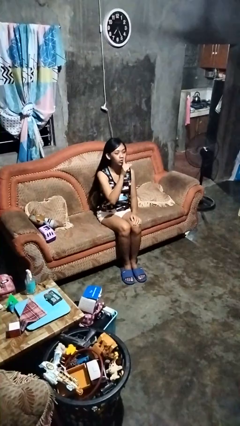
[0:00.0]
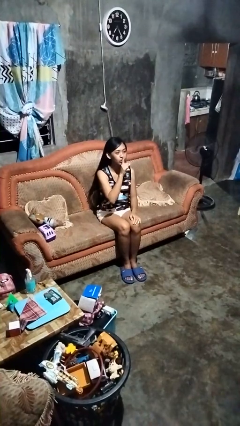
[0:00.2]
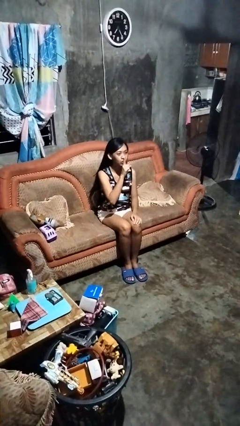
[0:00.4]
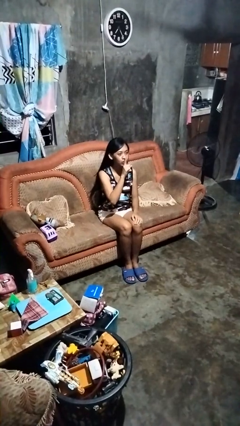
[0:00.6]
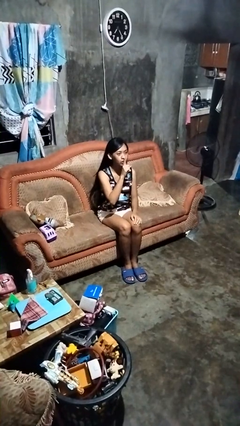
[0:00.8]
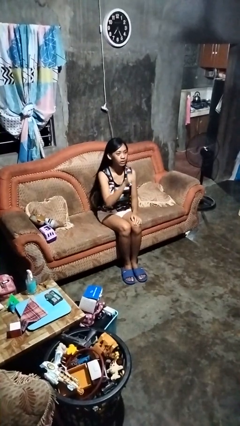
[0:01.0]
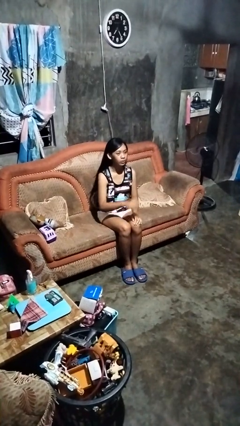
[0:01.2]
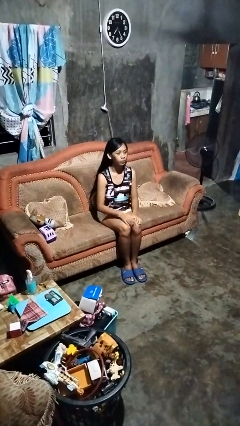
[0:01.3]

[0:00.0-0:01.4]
person gestures be quiet

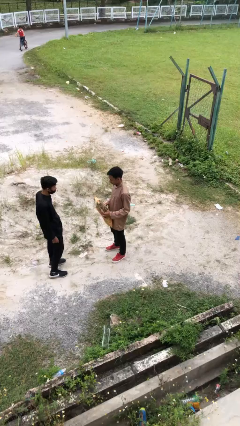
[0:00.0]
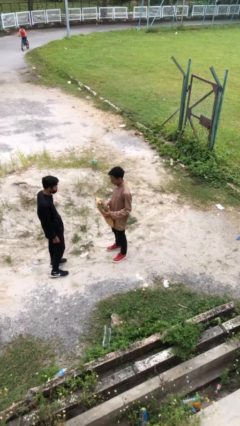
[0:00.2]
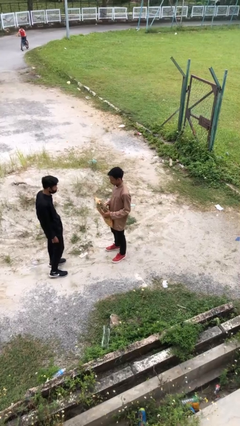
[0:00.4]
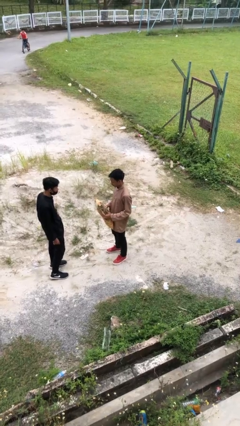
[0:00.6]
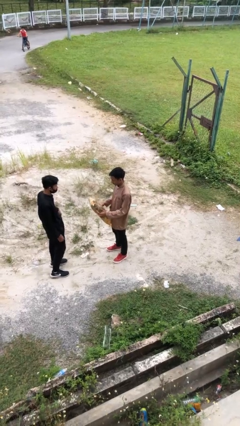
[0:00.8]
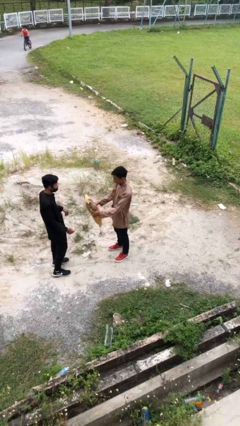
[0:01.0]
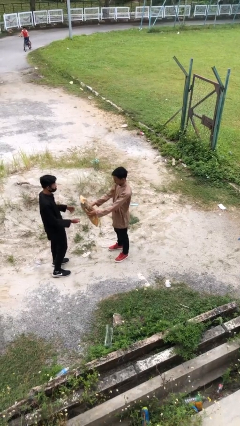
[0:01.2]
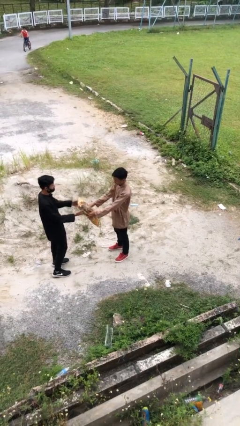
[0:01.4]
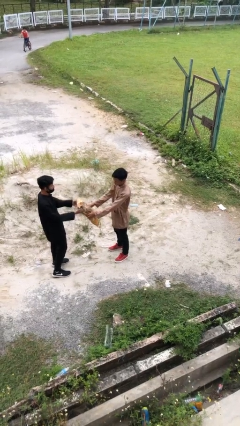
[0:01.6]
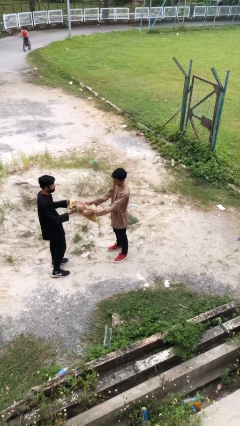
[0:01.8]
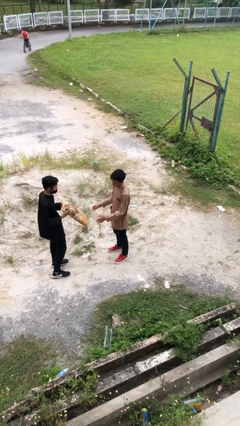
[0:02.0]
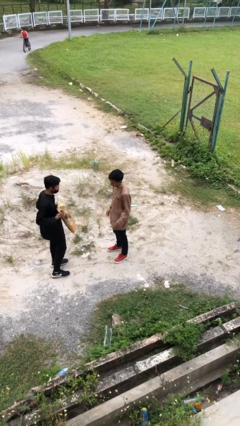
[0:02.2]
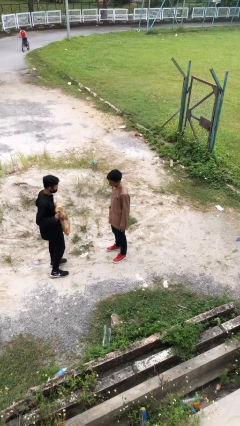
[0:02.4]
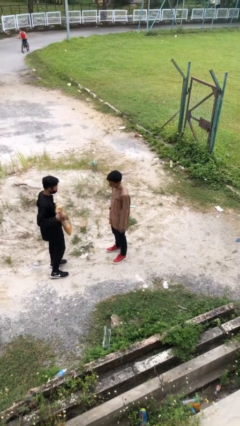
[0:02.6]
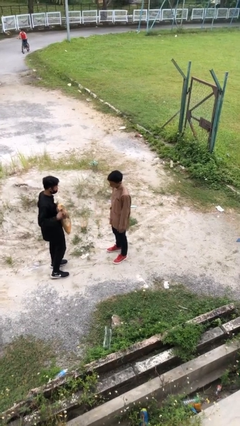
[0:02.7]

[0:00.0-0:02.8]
person transfers object to person

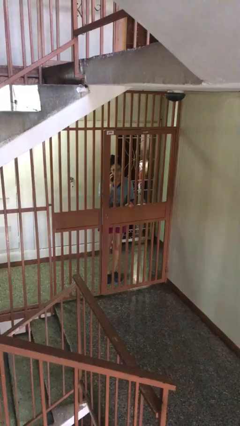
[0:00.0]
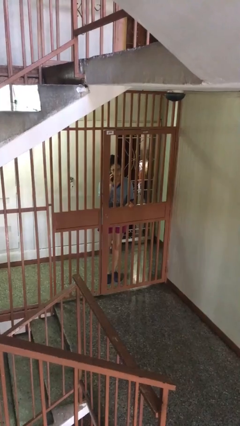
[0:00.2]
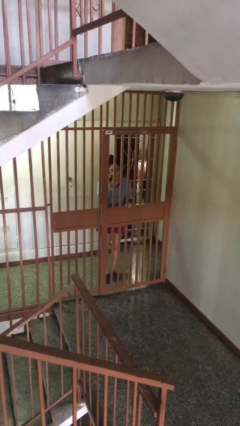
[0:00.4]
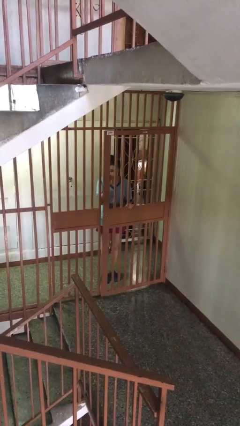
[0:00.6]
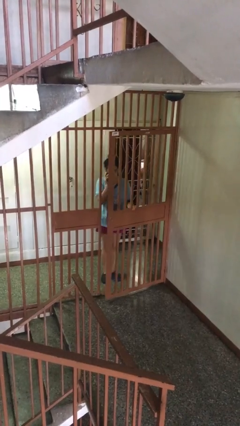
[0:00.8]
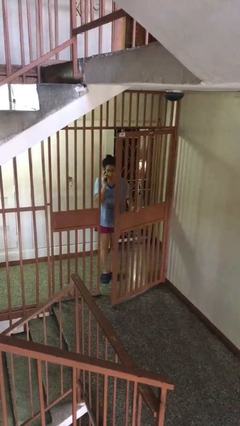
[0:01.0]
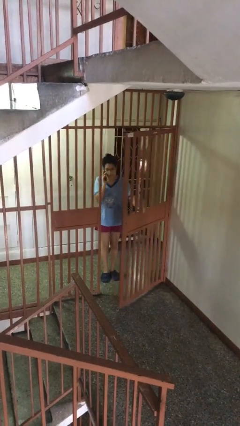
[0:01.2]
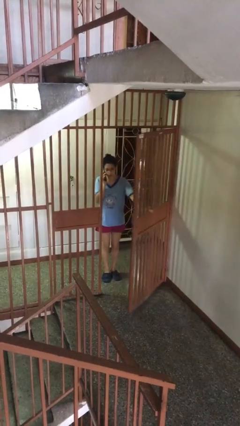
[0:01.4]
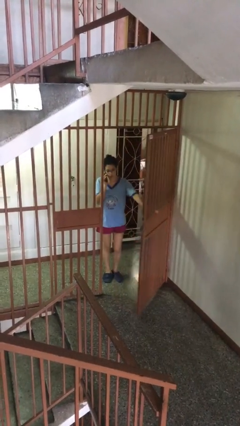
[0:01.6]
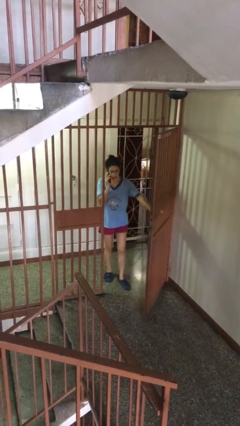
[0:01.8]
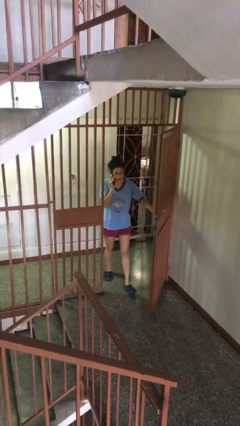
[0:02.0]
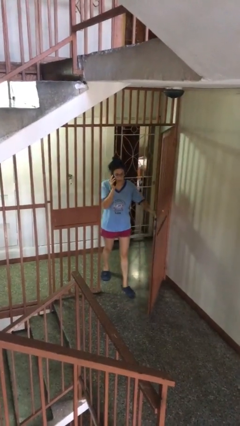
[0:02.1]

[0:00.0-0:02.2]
person opens facility door

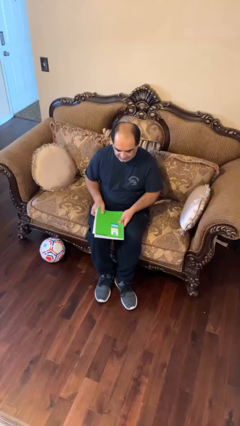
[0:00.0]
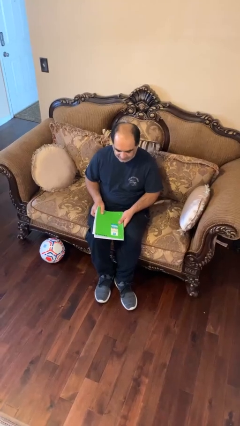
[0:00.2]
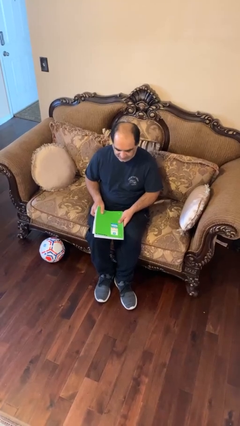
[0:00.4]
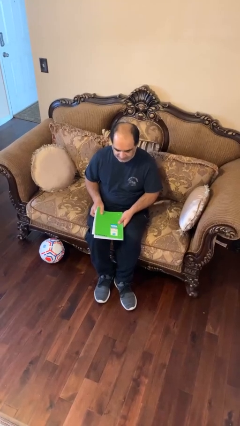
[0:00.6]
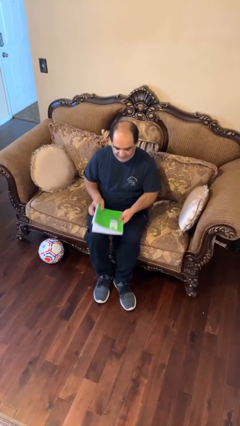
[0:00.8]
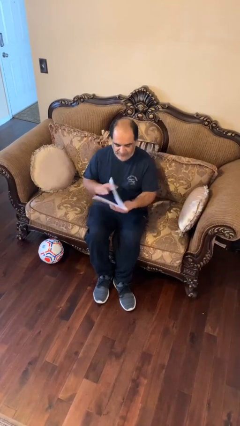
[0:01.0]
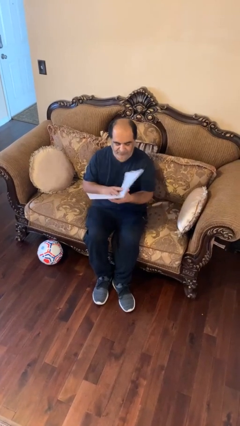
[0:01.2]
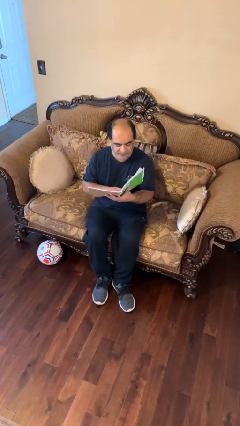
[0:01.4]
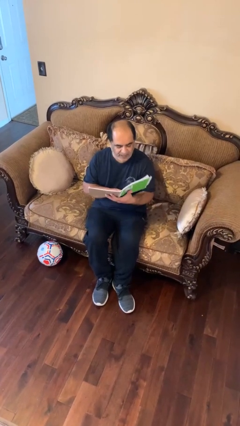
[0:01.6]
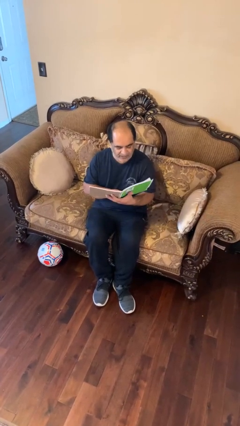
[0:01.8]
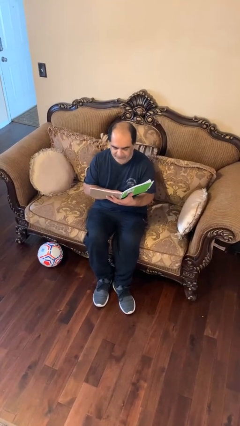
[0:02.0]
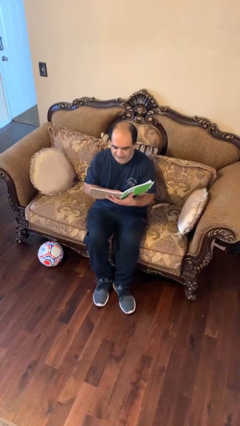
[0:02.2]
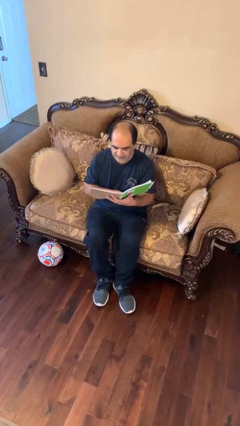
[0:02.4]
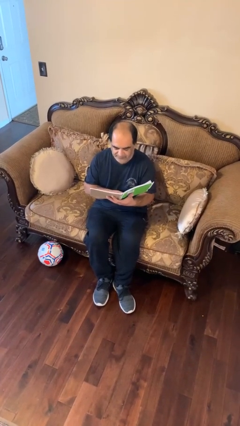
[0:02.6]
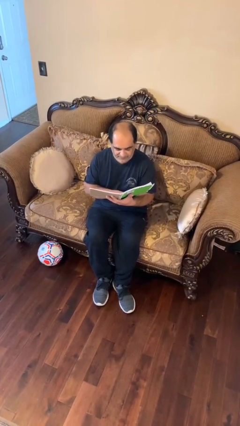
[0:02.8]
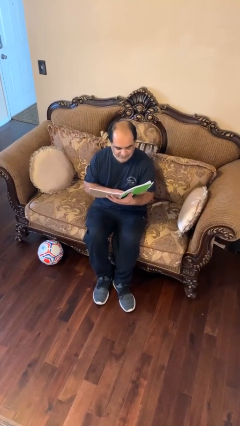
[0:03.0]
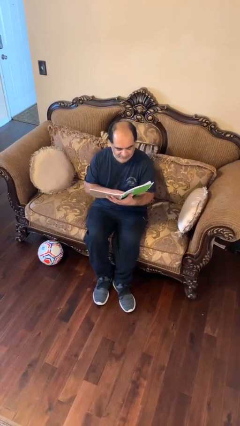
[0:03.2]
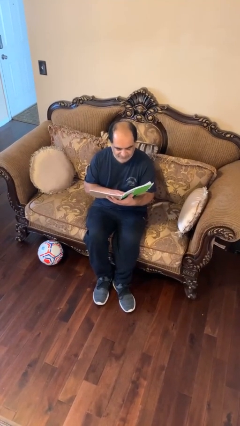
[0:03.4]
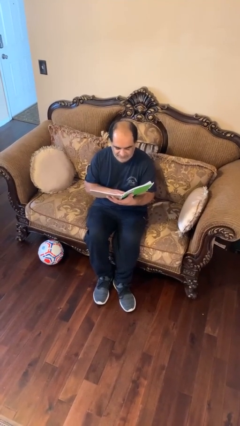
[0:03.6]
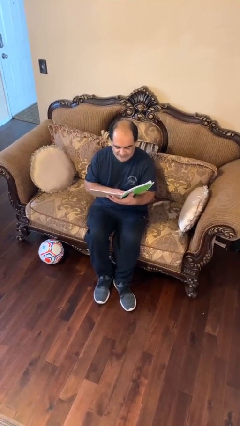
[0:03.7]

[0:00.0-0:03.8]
person reads document

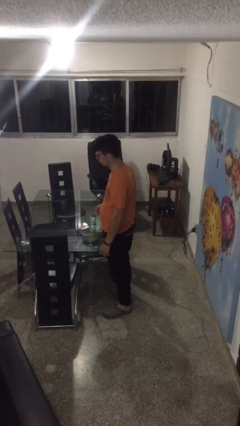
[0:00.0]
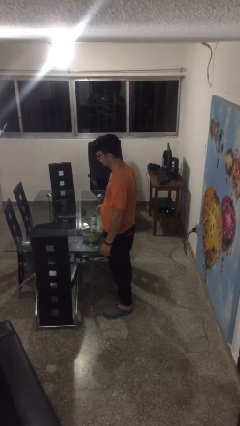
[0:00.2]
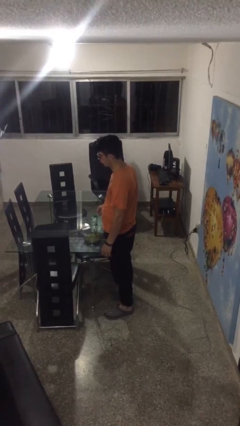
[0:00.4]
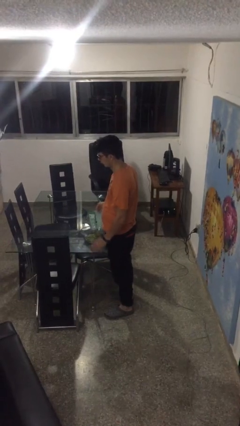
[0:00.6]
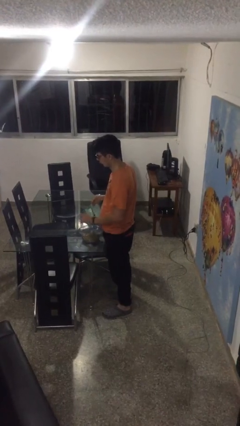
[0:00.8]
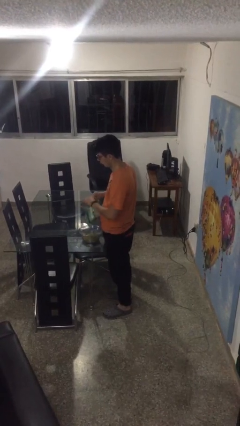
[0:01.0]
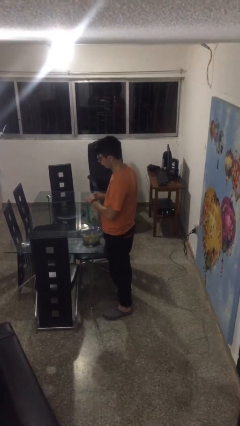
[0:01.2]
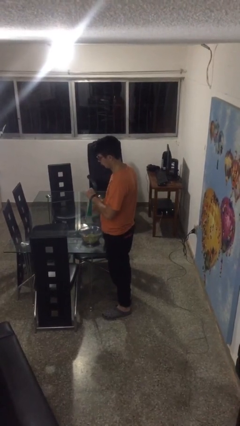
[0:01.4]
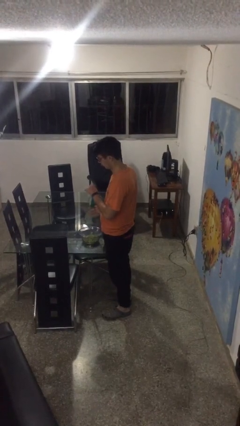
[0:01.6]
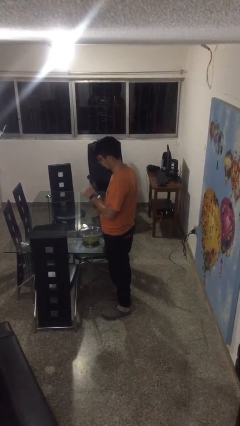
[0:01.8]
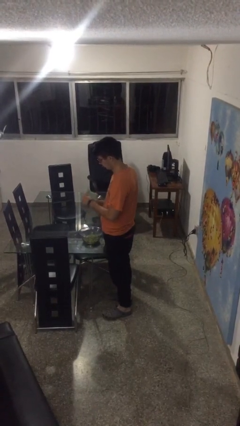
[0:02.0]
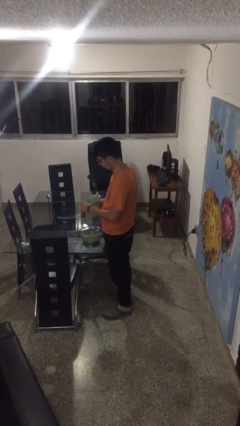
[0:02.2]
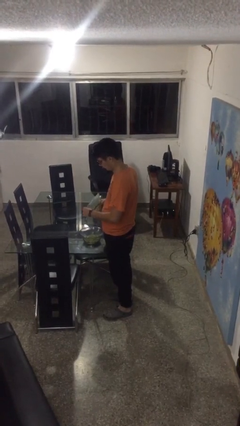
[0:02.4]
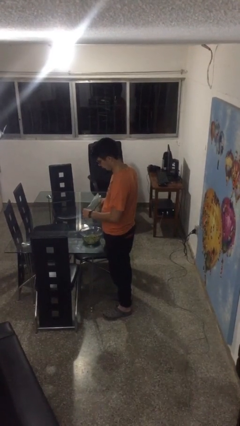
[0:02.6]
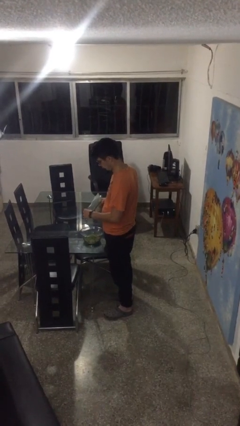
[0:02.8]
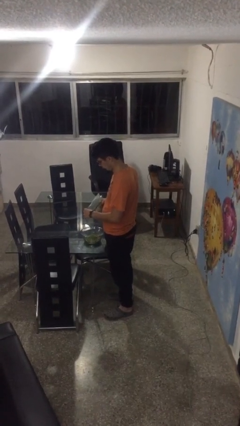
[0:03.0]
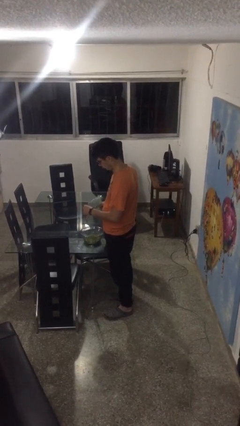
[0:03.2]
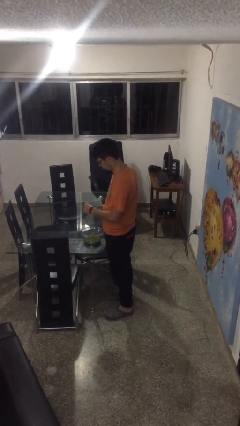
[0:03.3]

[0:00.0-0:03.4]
person pours into bowl

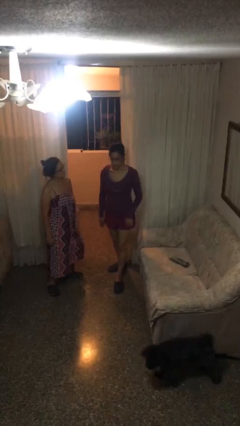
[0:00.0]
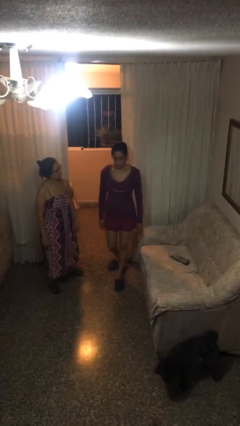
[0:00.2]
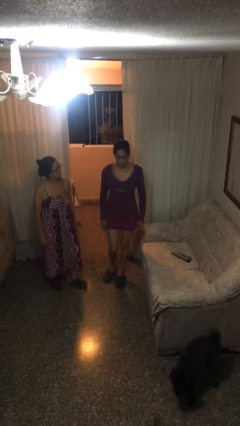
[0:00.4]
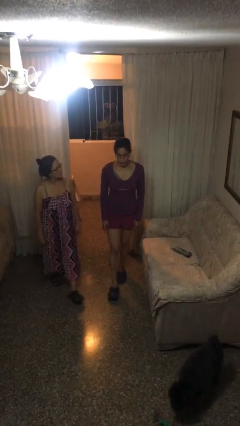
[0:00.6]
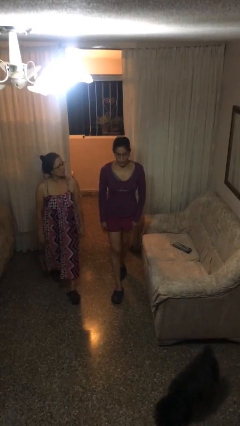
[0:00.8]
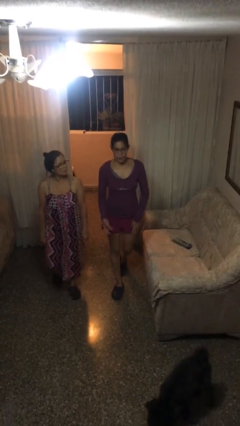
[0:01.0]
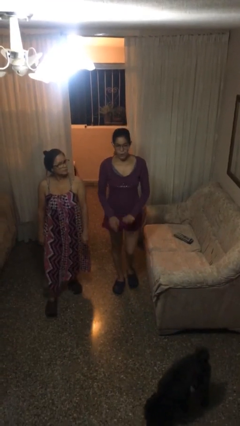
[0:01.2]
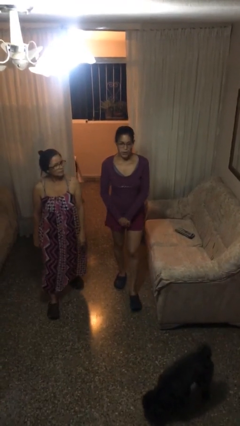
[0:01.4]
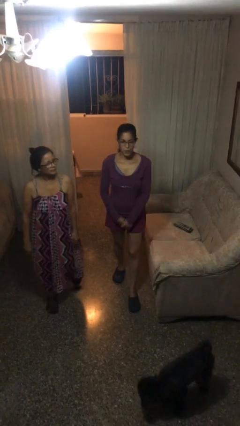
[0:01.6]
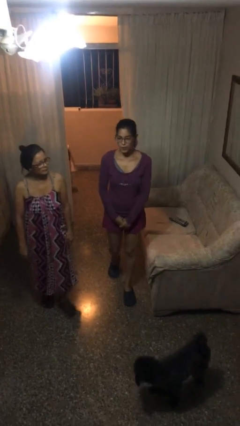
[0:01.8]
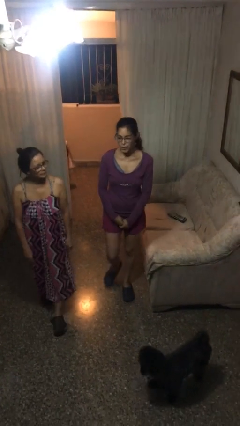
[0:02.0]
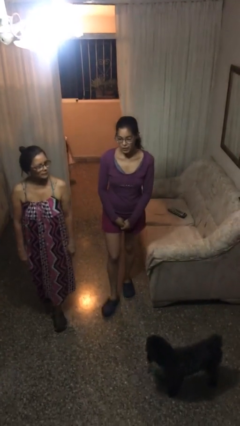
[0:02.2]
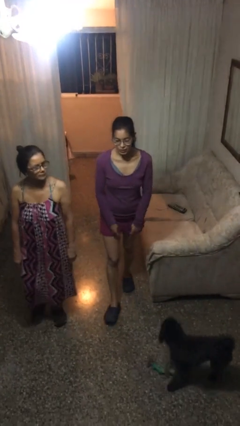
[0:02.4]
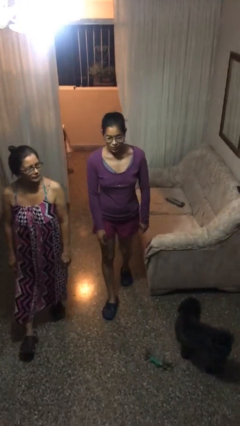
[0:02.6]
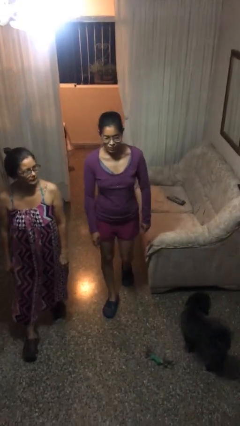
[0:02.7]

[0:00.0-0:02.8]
person talks to person

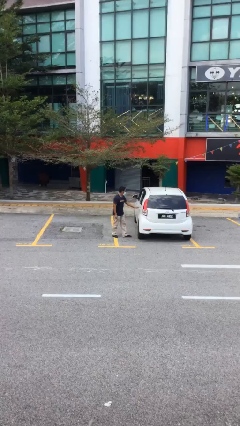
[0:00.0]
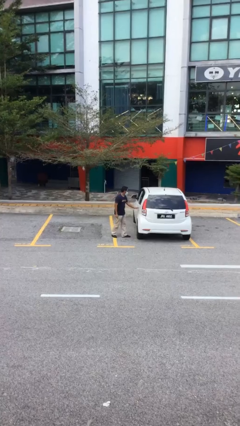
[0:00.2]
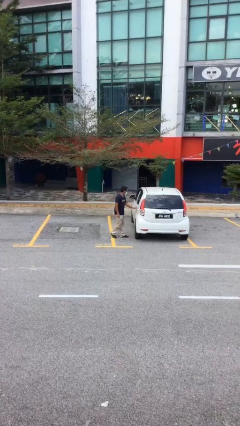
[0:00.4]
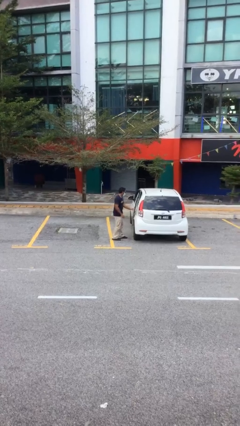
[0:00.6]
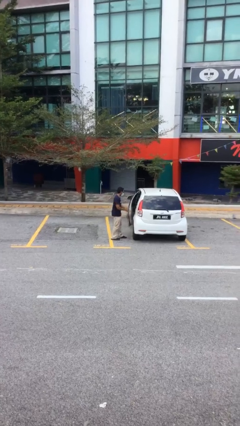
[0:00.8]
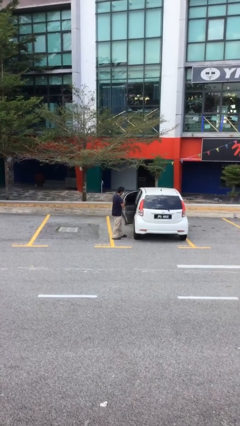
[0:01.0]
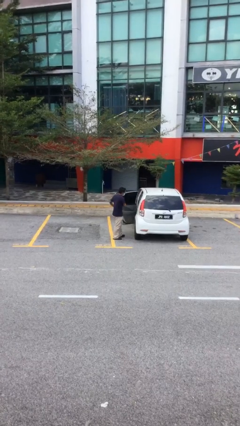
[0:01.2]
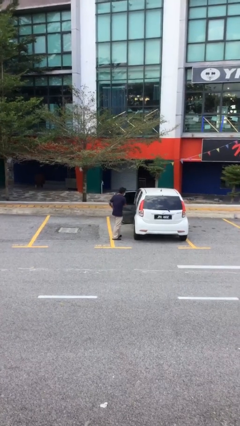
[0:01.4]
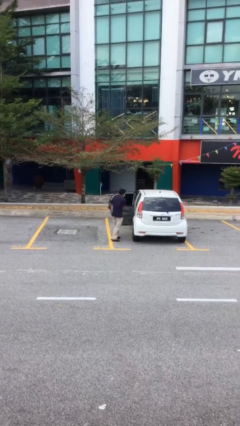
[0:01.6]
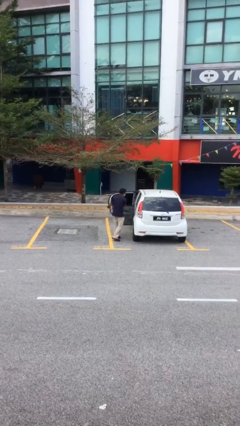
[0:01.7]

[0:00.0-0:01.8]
person opens car door
